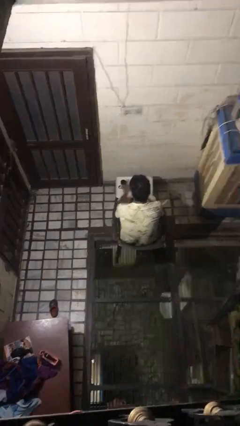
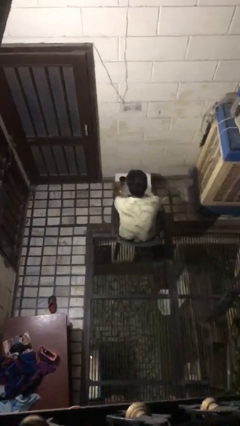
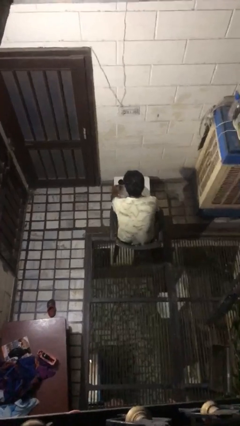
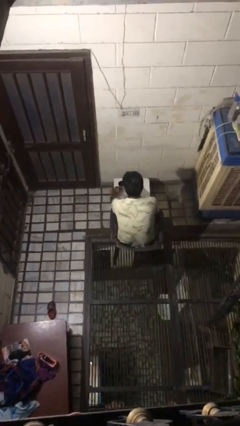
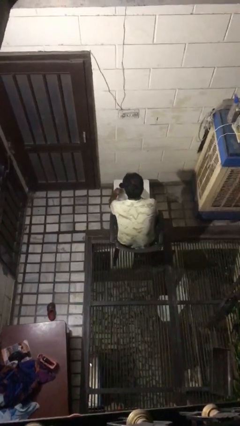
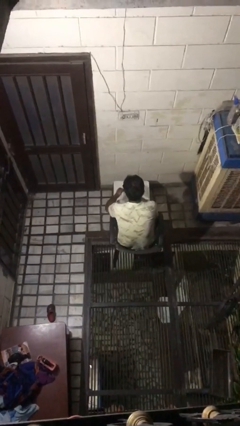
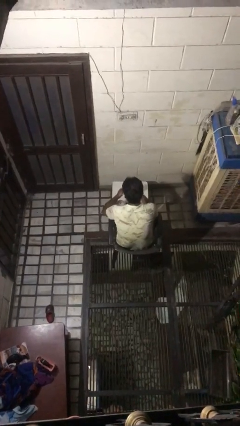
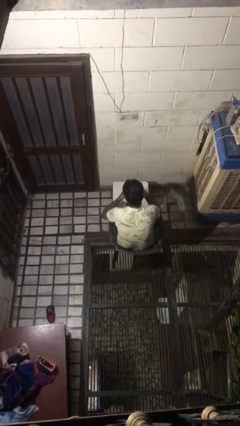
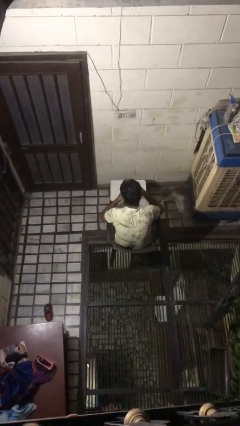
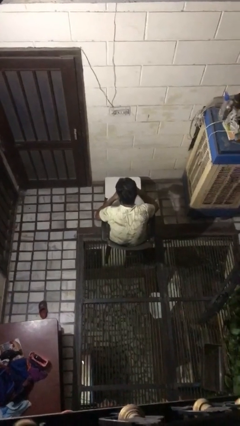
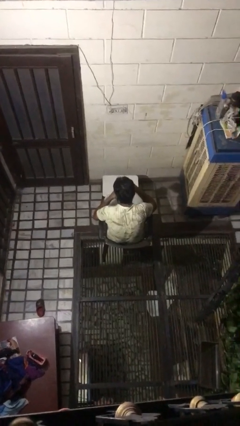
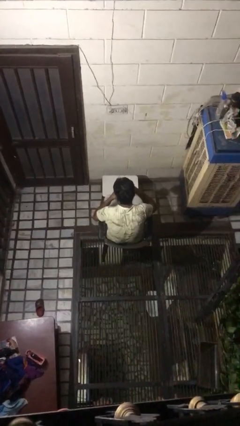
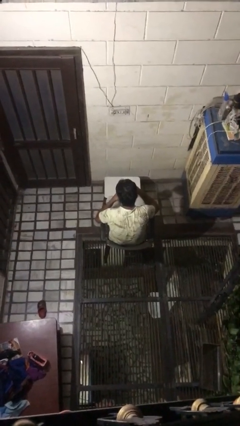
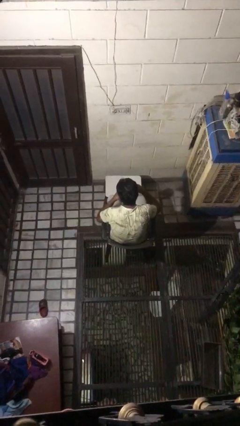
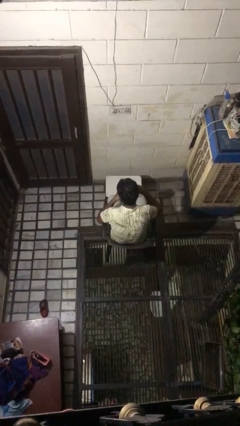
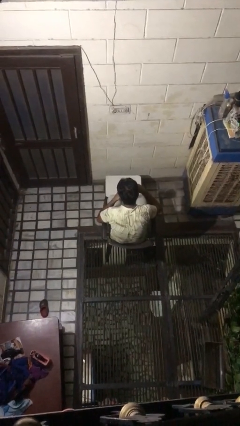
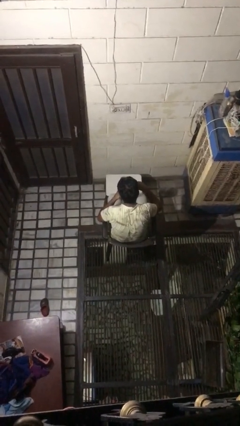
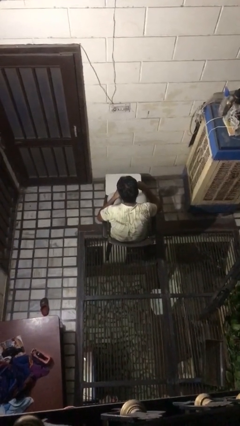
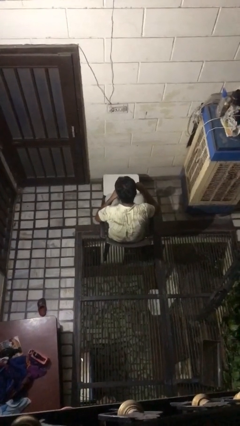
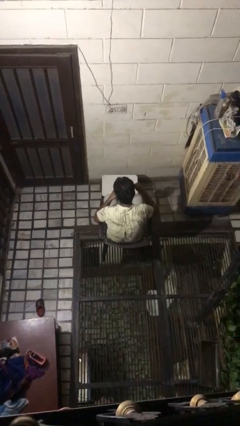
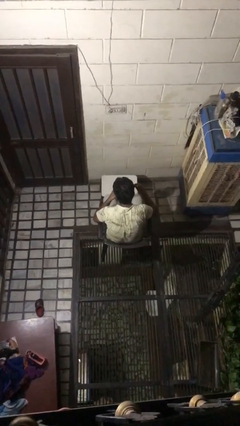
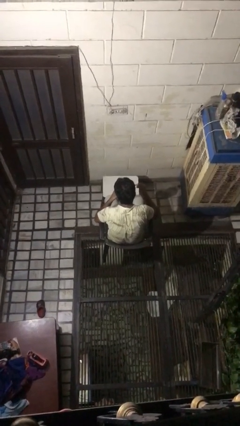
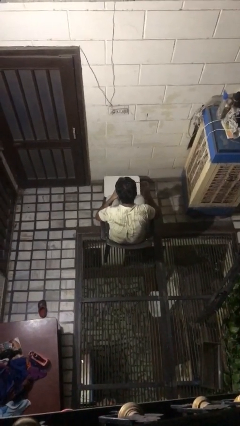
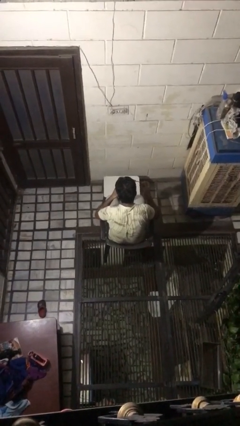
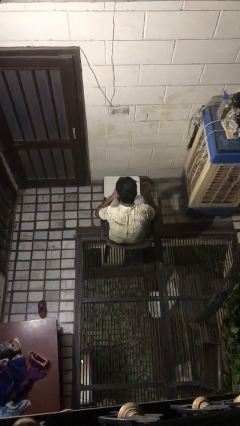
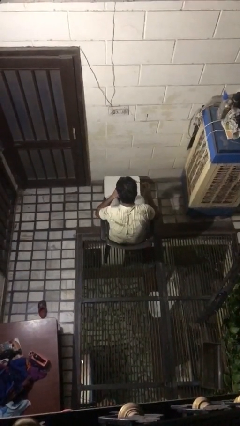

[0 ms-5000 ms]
person stirs mug

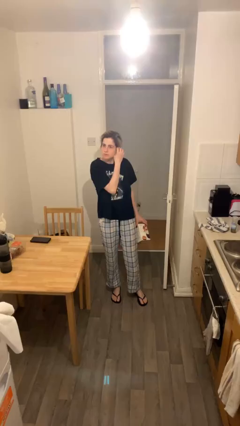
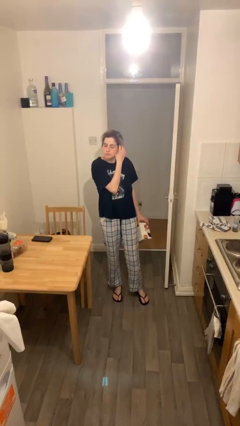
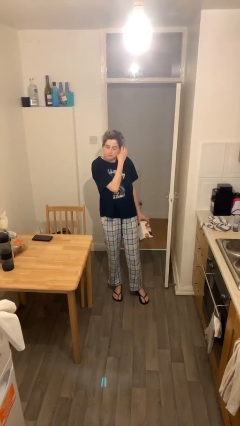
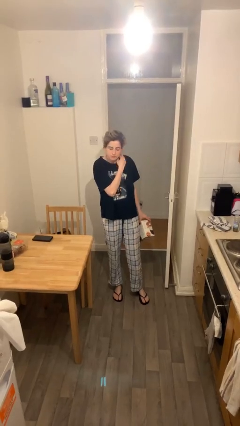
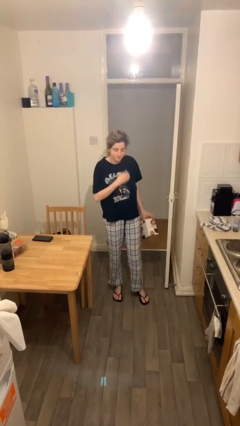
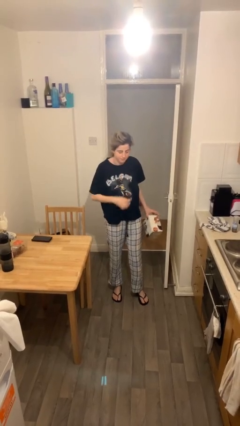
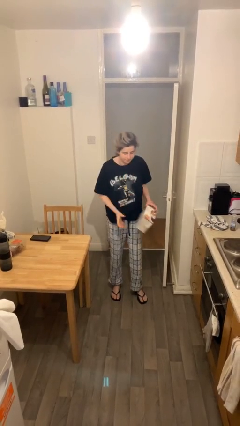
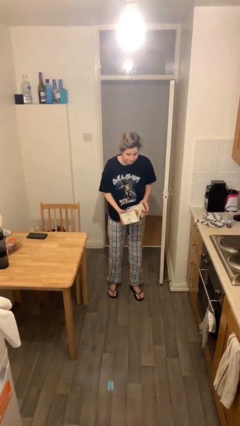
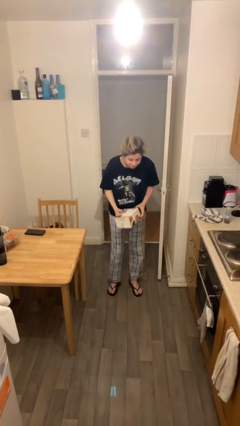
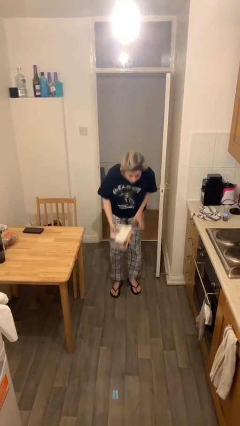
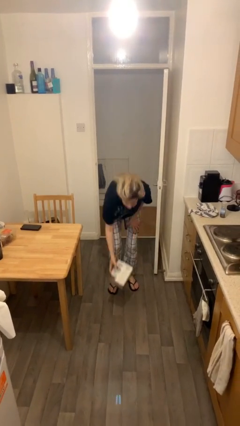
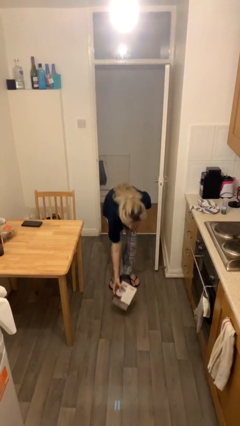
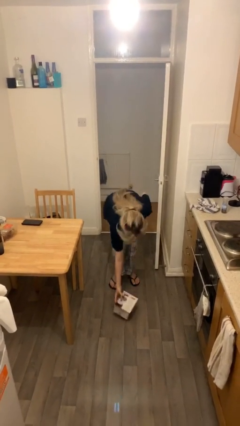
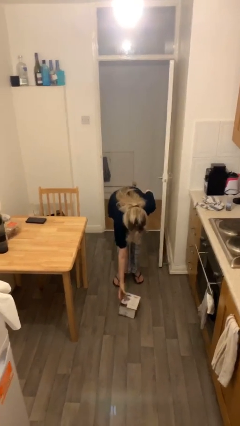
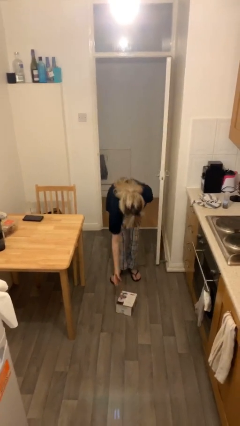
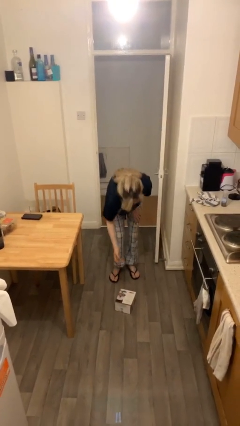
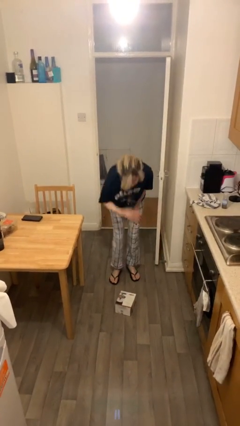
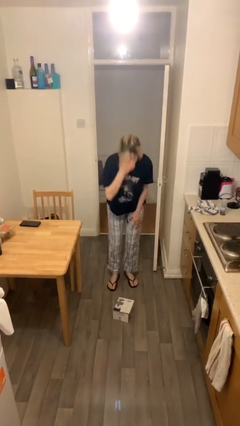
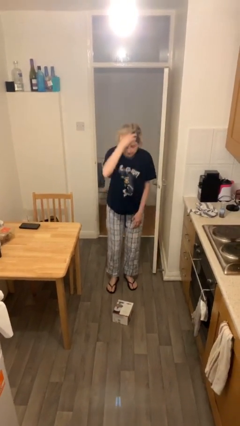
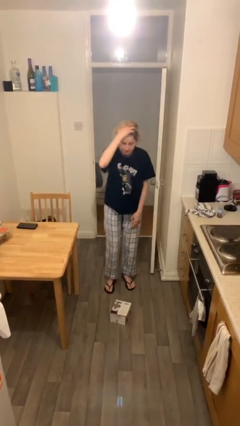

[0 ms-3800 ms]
person puts down object on floor

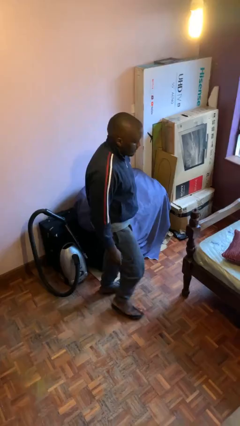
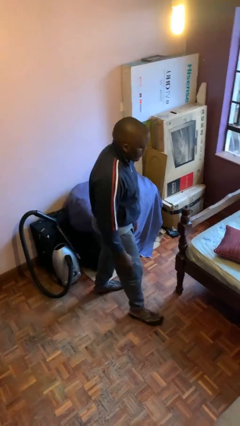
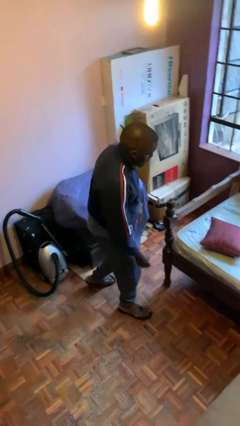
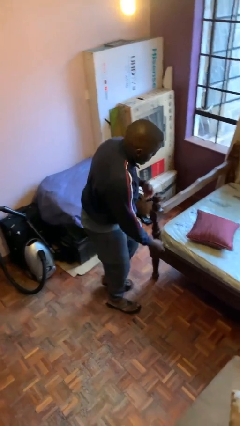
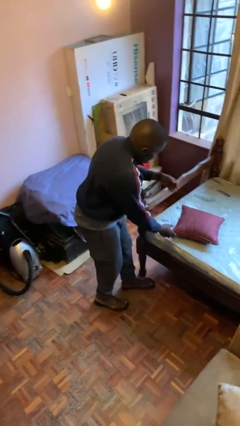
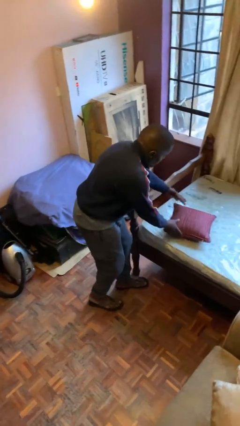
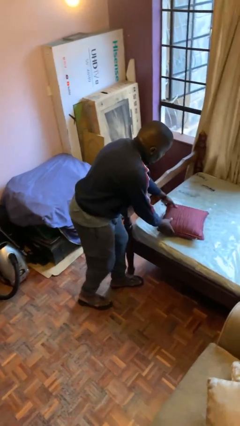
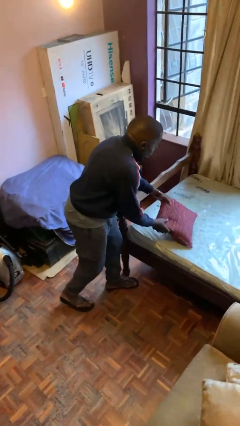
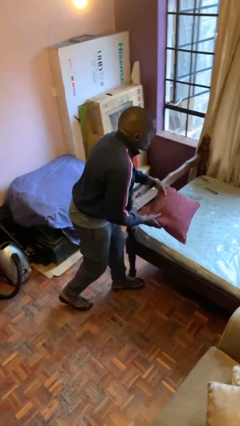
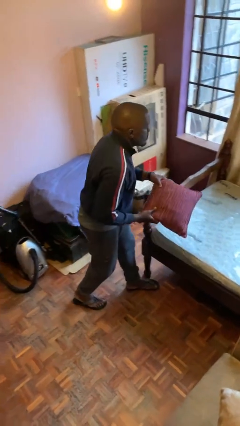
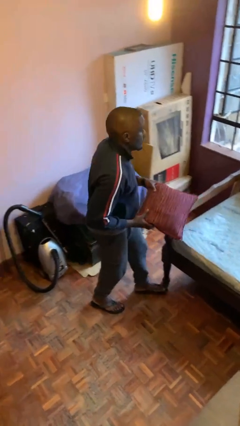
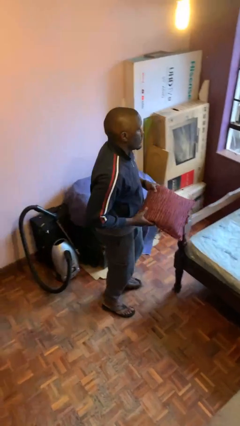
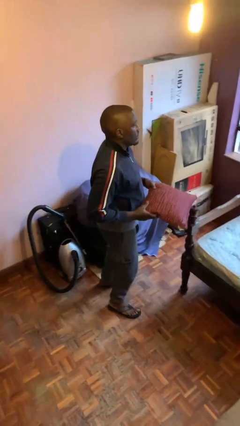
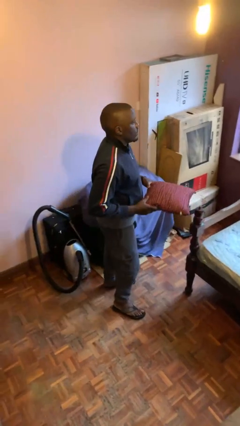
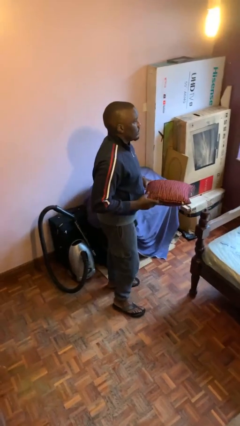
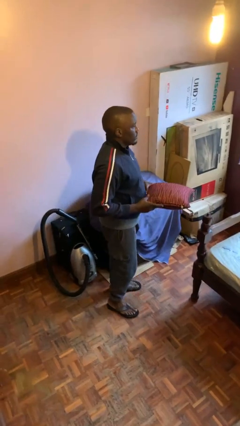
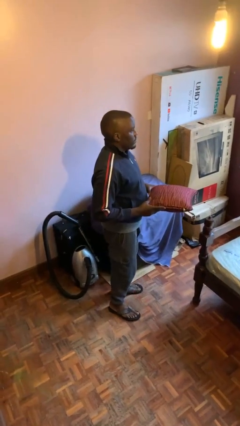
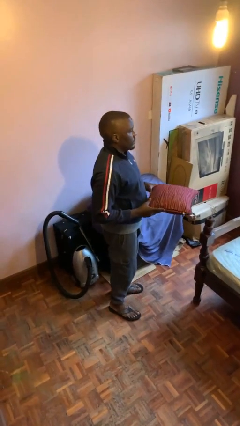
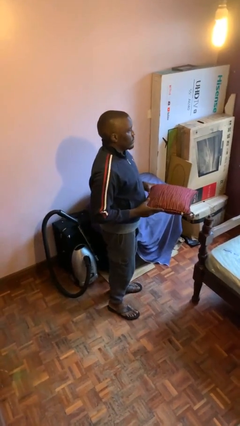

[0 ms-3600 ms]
person picks up object from bed

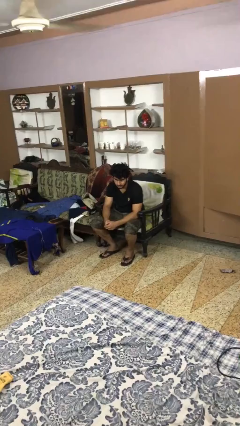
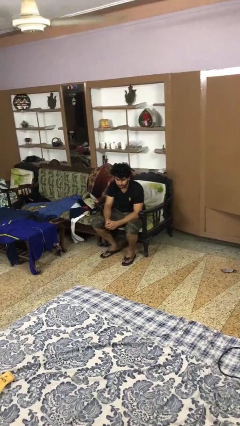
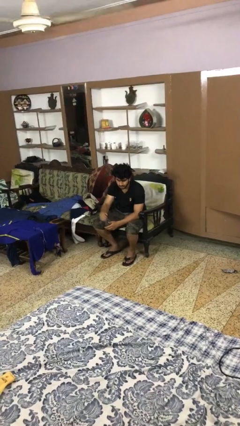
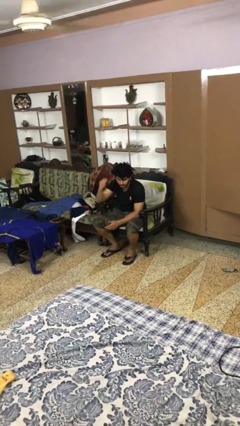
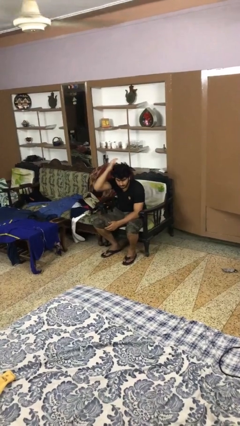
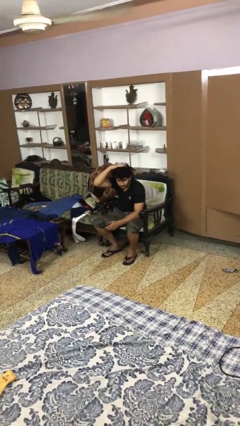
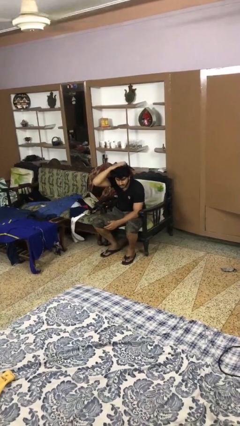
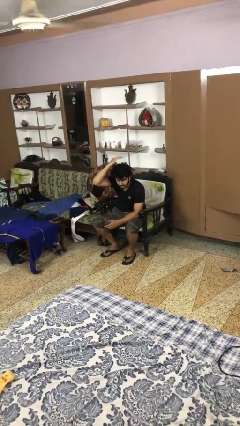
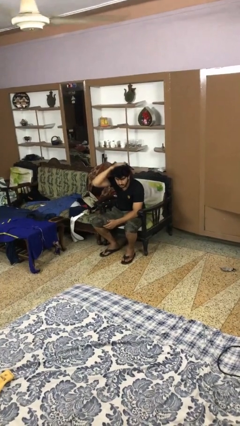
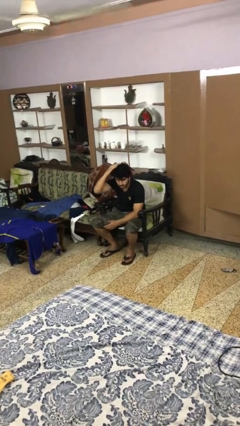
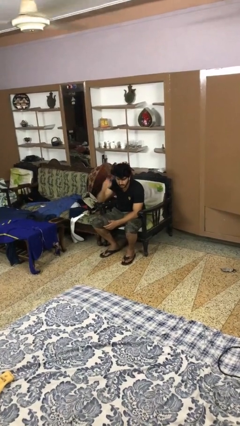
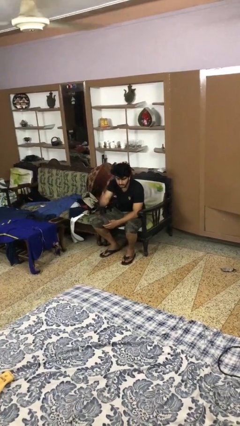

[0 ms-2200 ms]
person pats head

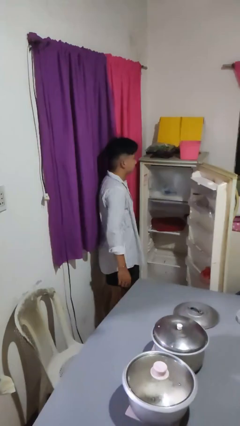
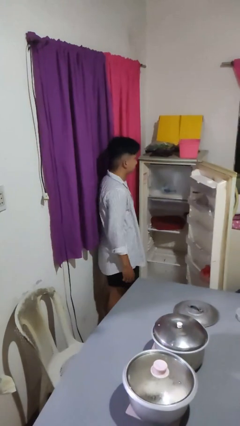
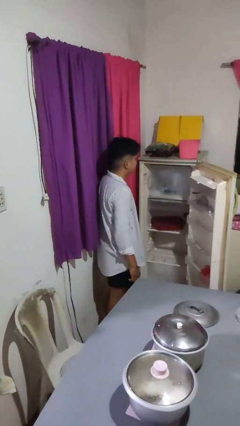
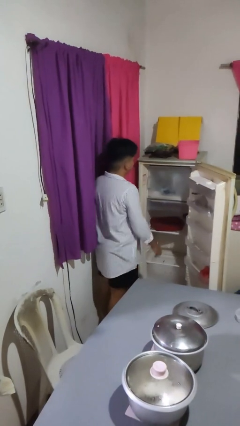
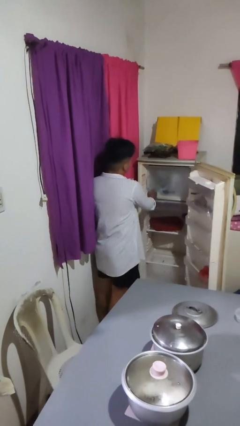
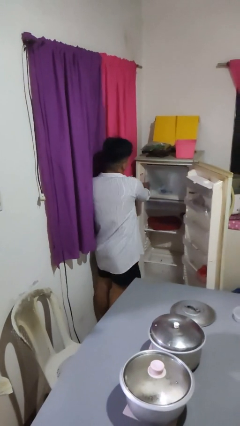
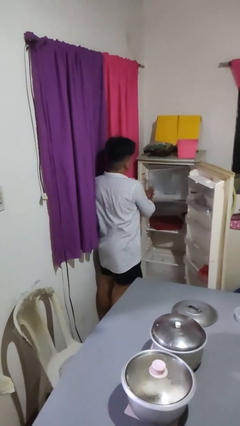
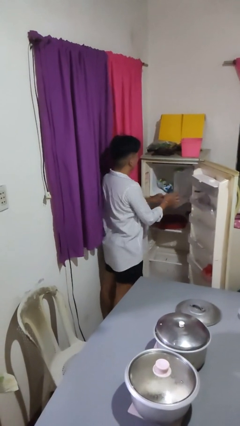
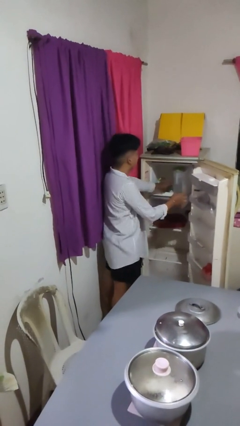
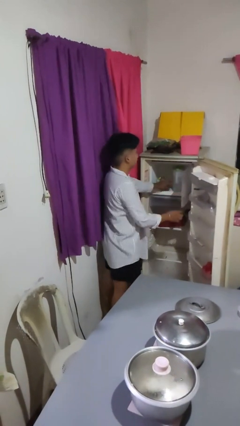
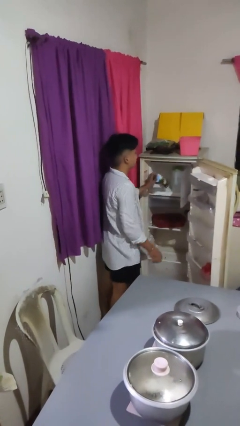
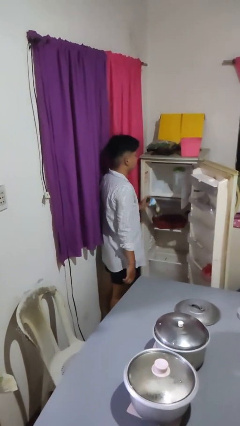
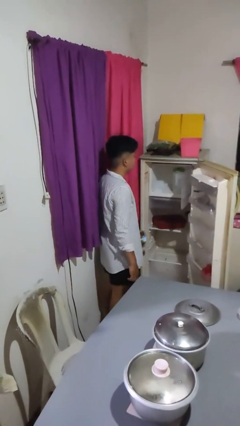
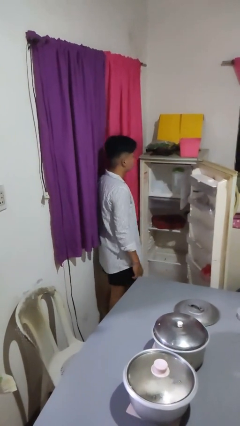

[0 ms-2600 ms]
person takes object from refrigerator
